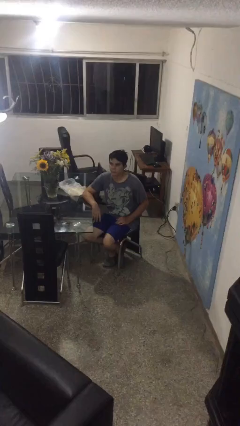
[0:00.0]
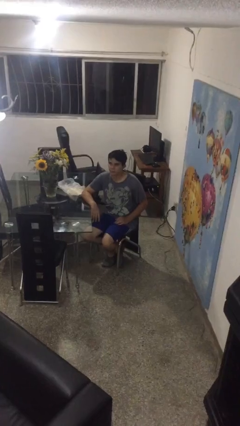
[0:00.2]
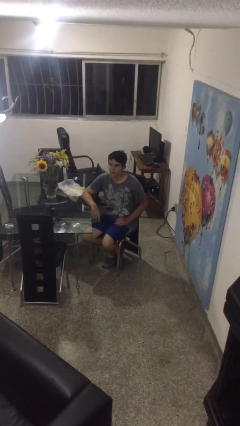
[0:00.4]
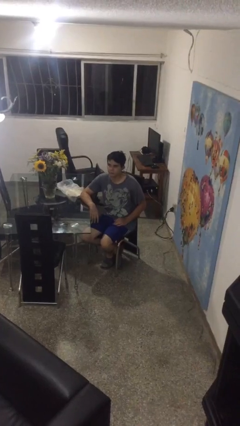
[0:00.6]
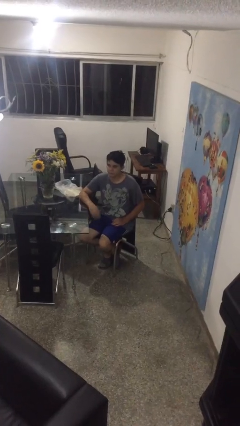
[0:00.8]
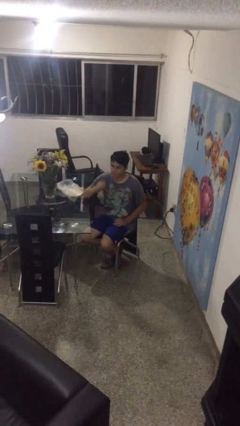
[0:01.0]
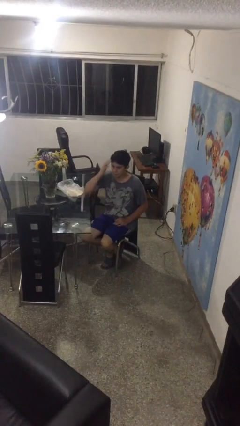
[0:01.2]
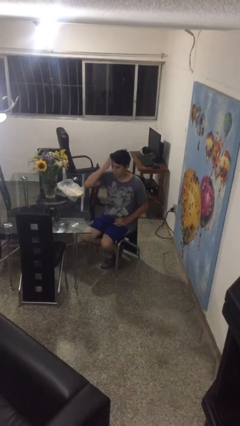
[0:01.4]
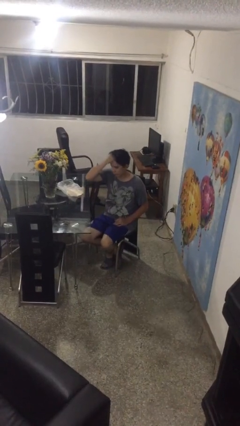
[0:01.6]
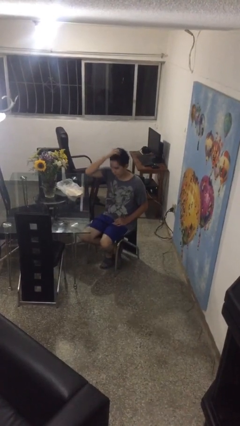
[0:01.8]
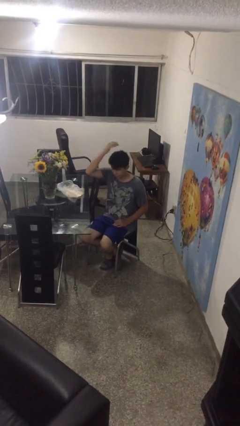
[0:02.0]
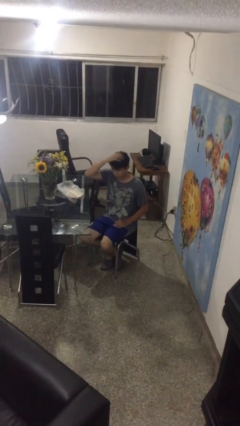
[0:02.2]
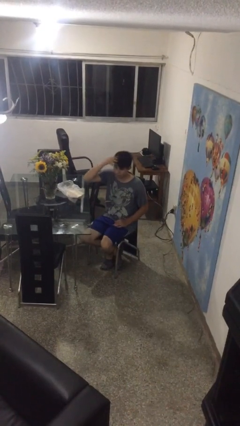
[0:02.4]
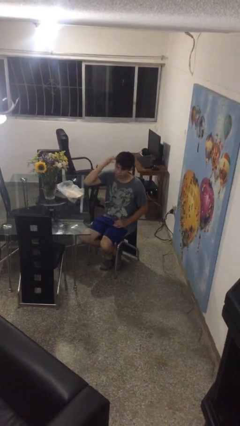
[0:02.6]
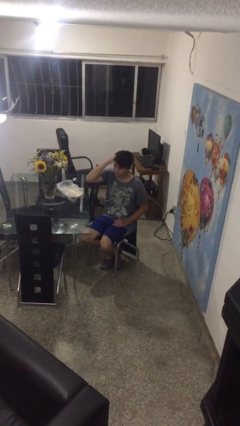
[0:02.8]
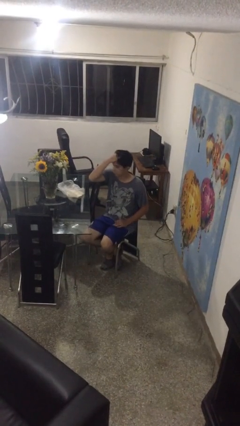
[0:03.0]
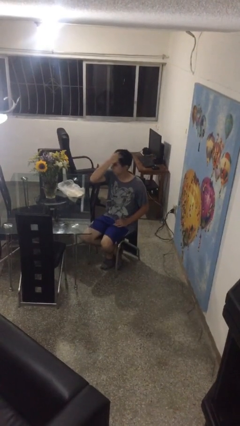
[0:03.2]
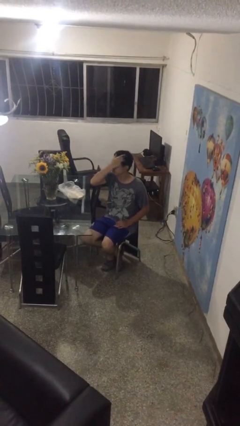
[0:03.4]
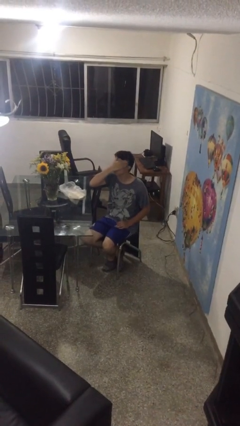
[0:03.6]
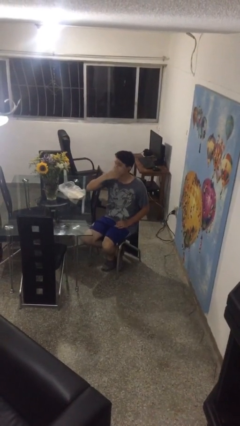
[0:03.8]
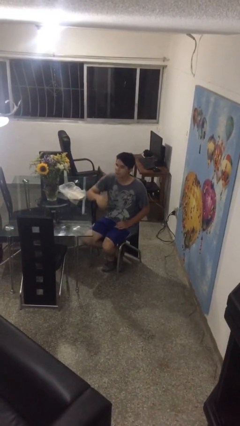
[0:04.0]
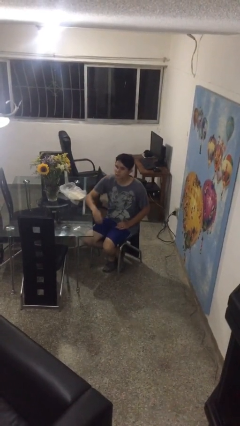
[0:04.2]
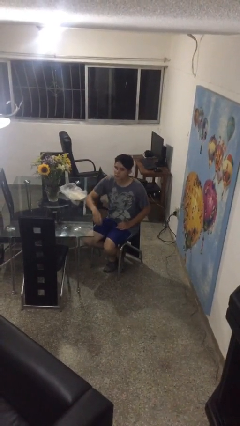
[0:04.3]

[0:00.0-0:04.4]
person strokes hair

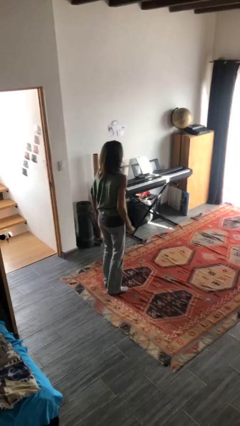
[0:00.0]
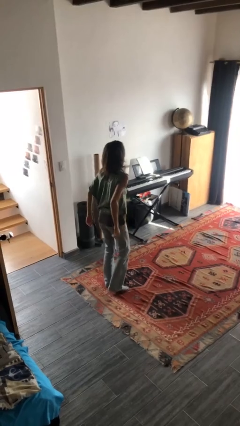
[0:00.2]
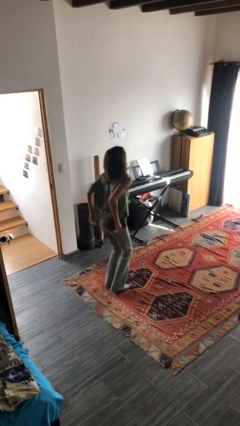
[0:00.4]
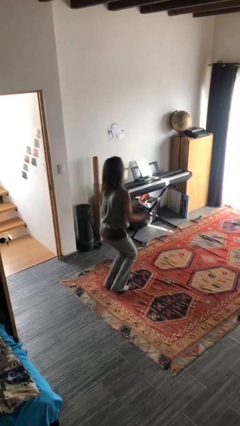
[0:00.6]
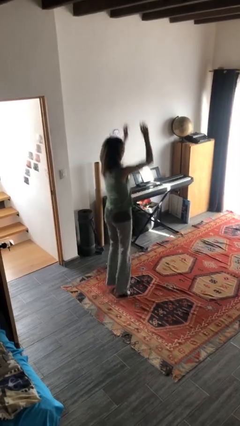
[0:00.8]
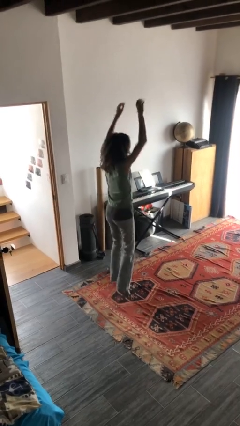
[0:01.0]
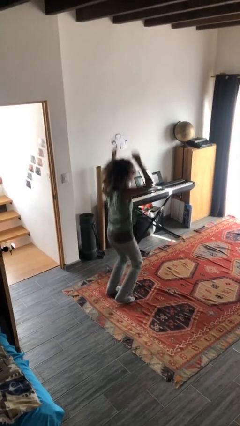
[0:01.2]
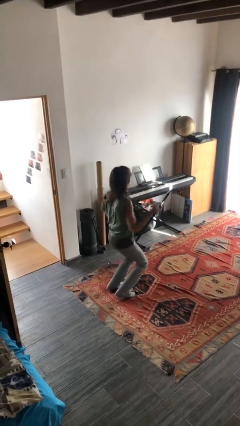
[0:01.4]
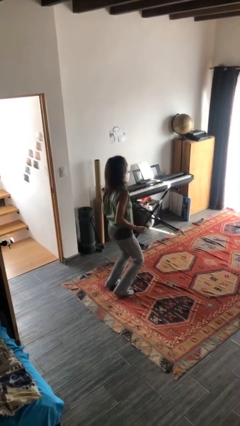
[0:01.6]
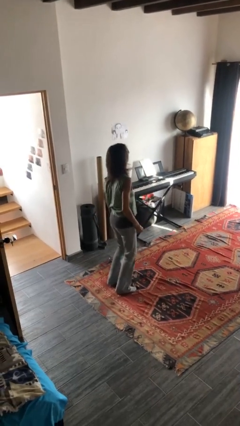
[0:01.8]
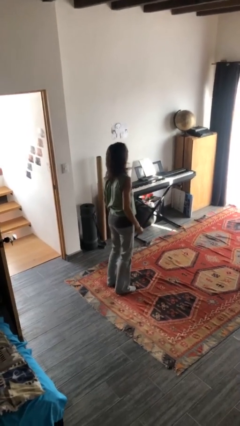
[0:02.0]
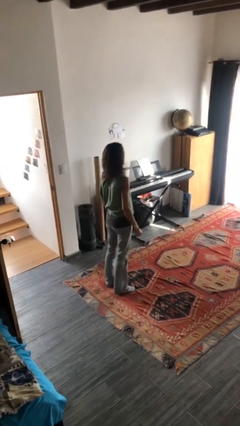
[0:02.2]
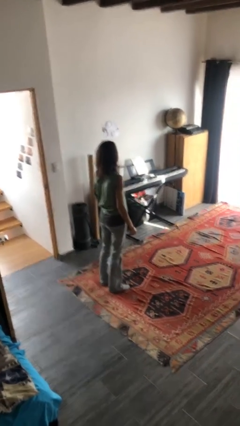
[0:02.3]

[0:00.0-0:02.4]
person jumps

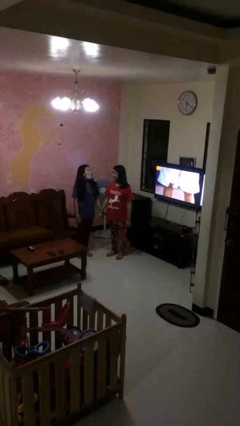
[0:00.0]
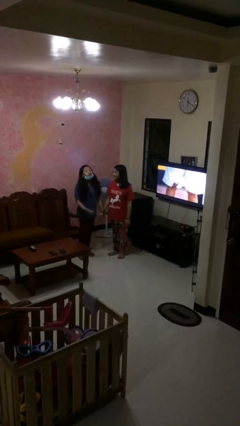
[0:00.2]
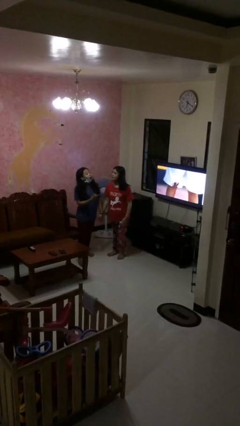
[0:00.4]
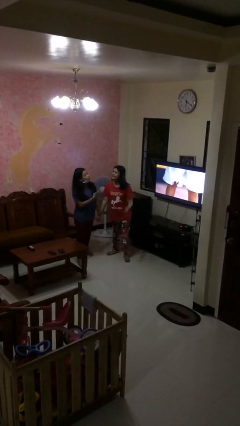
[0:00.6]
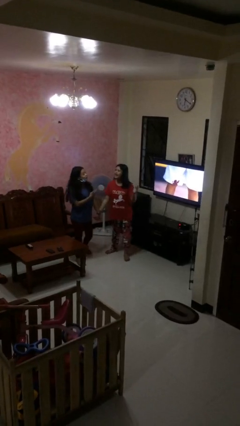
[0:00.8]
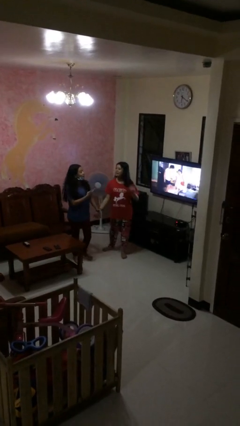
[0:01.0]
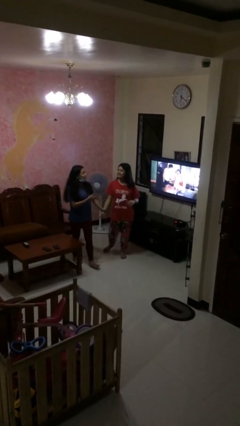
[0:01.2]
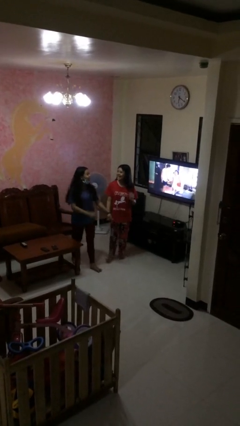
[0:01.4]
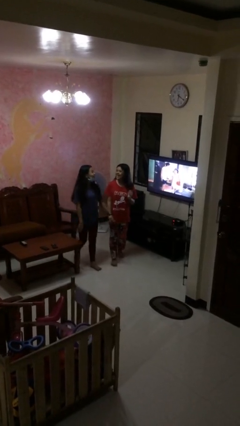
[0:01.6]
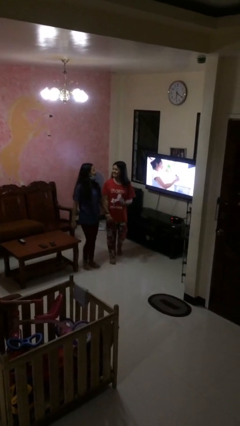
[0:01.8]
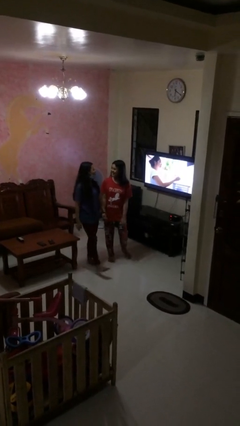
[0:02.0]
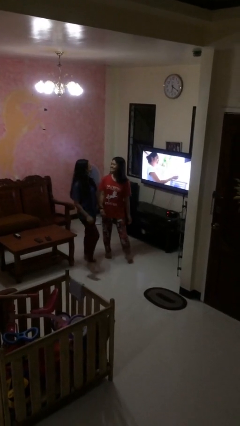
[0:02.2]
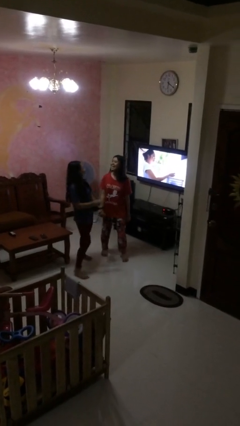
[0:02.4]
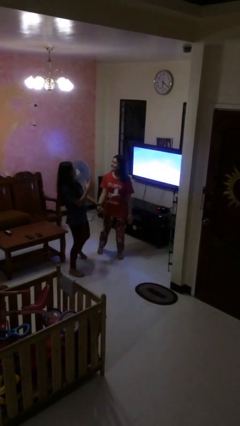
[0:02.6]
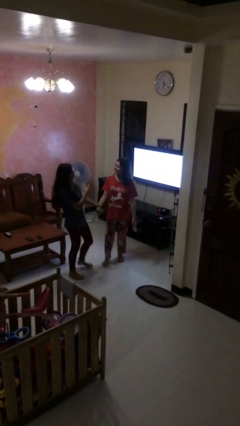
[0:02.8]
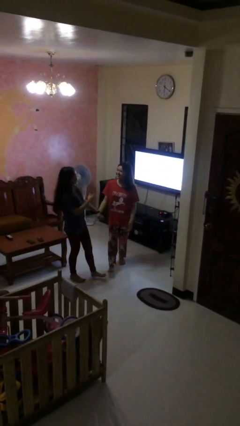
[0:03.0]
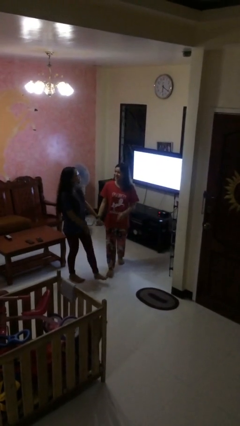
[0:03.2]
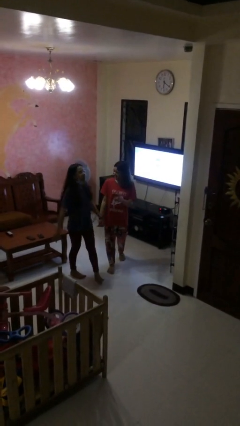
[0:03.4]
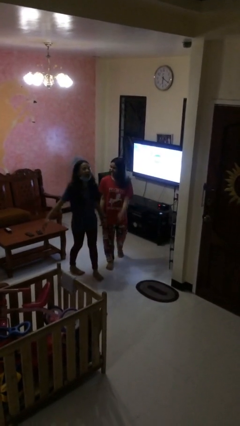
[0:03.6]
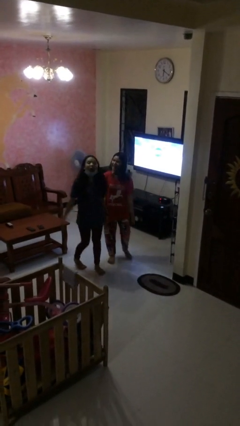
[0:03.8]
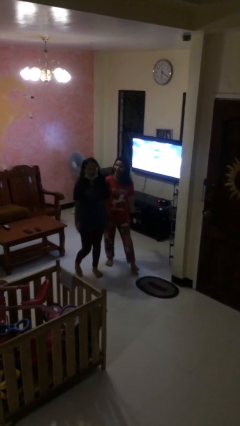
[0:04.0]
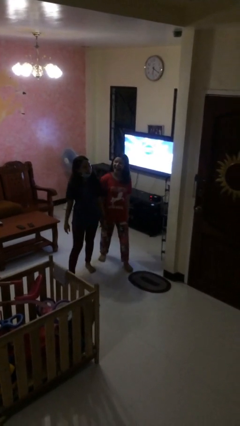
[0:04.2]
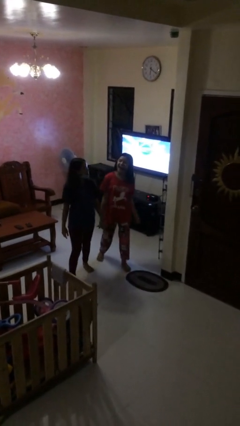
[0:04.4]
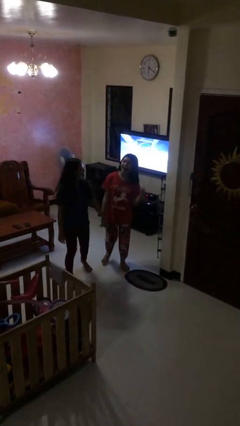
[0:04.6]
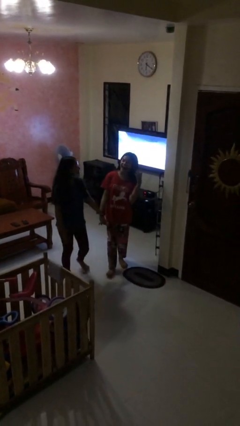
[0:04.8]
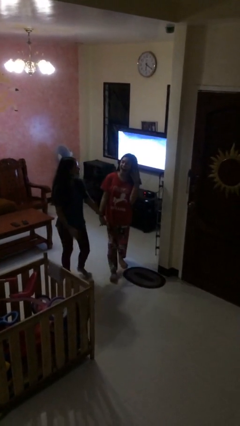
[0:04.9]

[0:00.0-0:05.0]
person holds hand

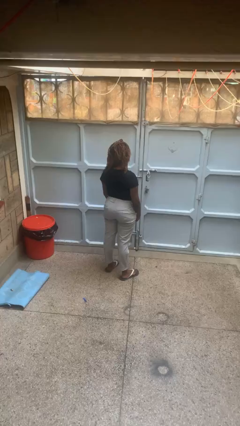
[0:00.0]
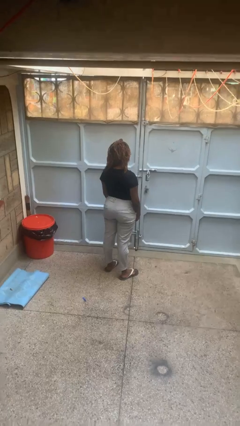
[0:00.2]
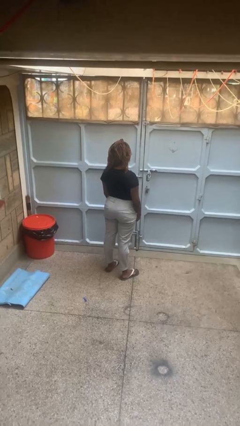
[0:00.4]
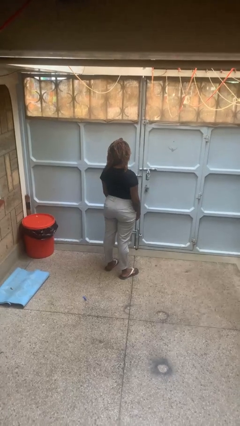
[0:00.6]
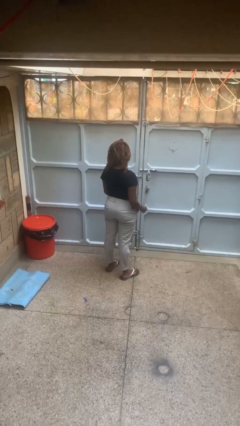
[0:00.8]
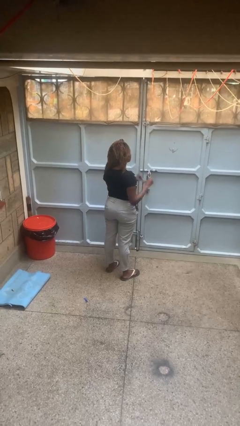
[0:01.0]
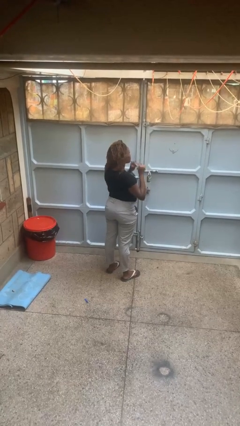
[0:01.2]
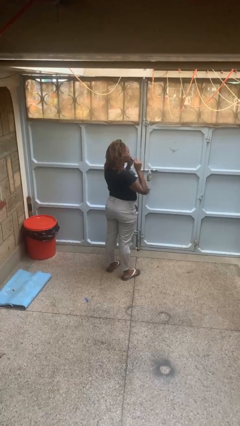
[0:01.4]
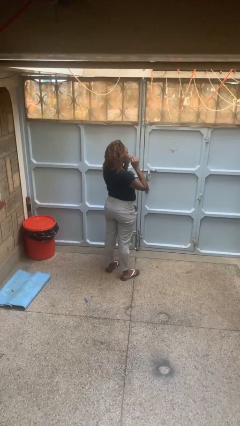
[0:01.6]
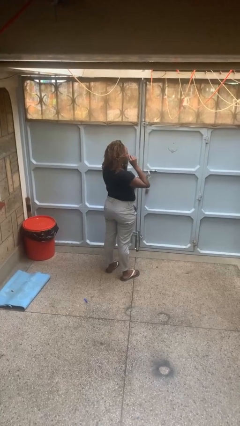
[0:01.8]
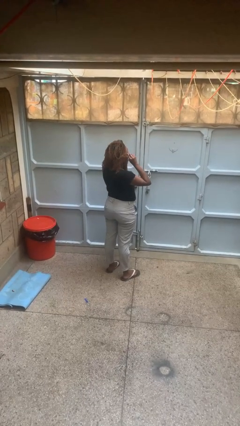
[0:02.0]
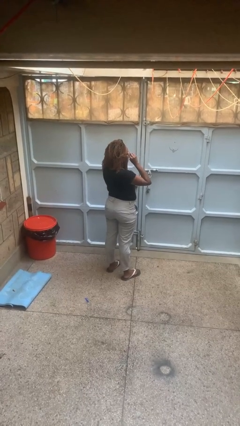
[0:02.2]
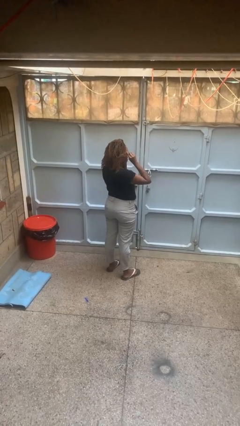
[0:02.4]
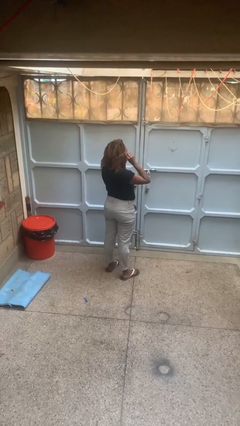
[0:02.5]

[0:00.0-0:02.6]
person puts on glasses

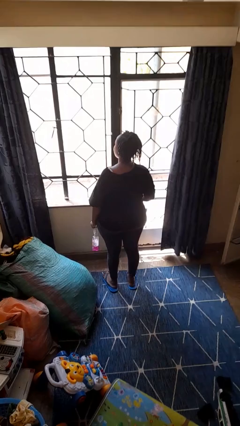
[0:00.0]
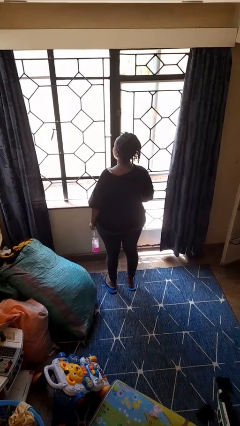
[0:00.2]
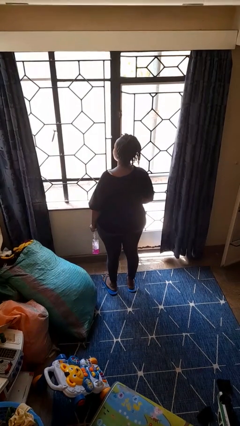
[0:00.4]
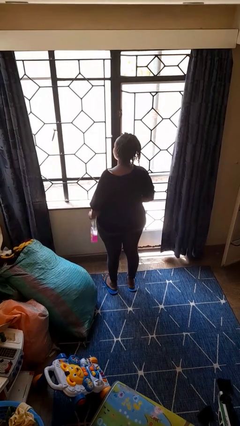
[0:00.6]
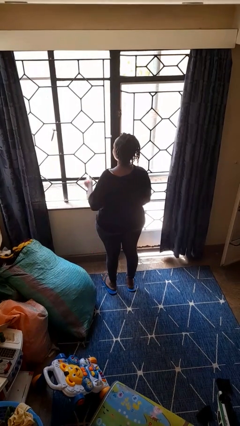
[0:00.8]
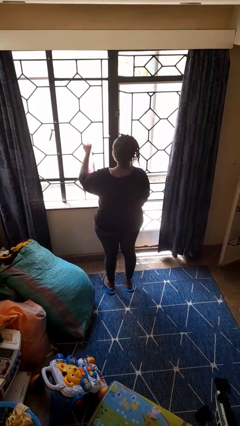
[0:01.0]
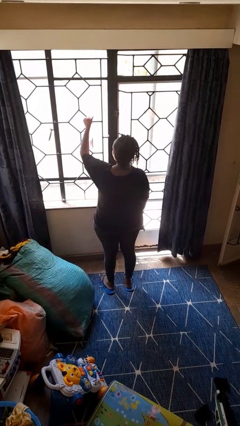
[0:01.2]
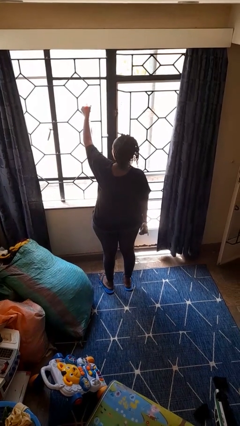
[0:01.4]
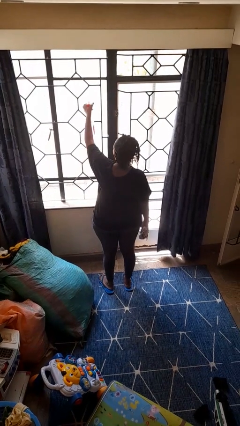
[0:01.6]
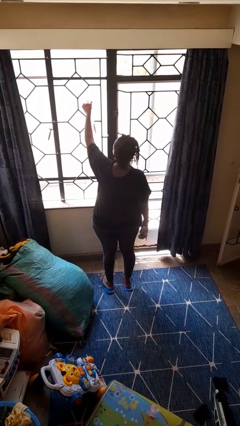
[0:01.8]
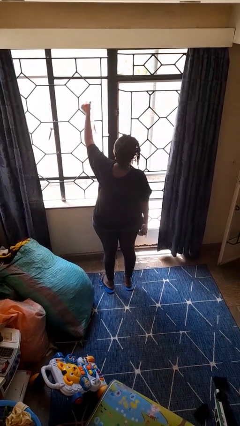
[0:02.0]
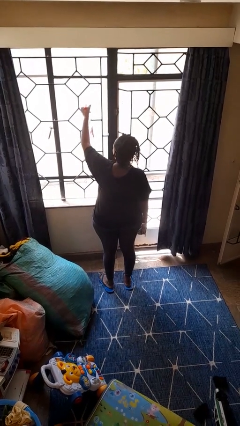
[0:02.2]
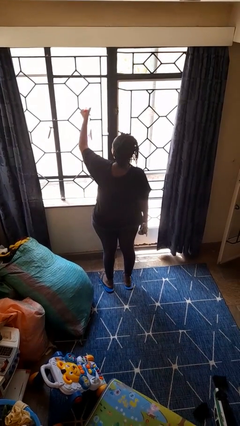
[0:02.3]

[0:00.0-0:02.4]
person sprays from bottle

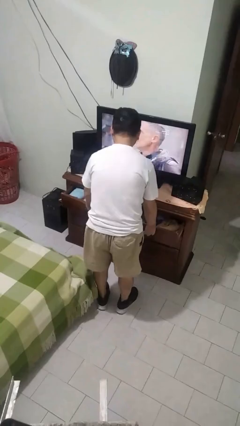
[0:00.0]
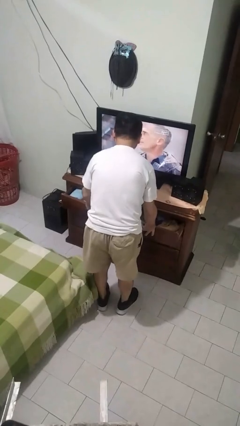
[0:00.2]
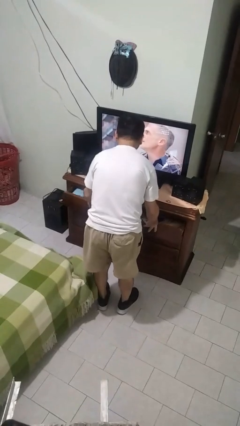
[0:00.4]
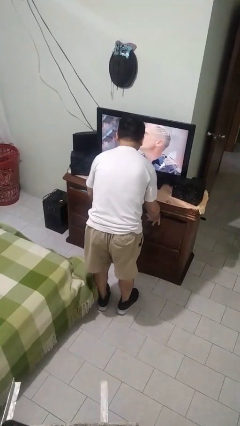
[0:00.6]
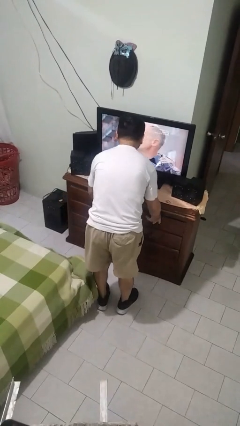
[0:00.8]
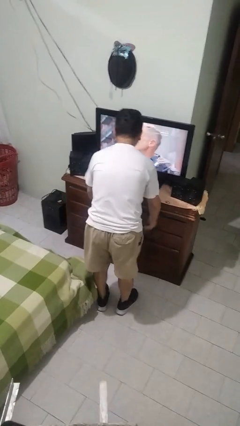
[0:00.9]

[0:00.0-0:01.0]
person closes dresser drawer
